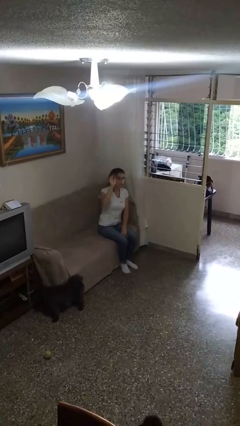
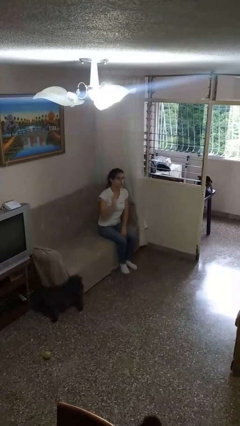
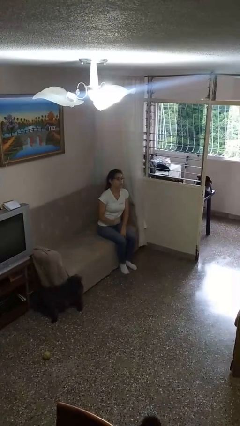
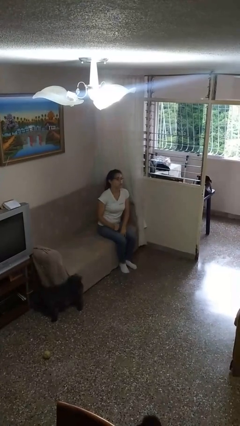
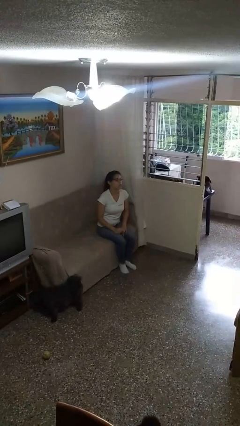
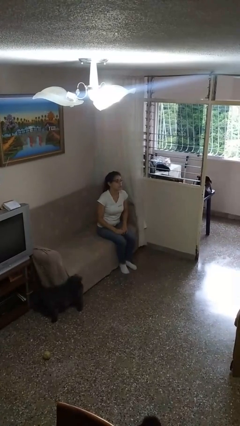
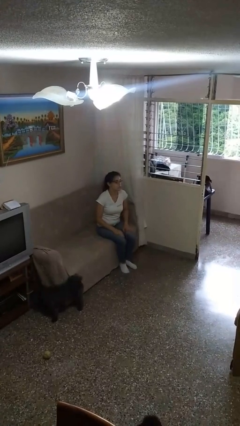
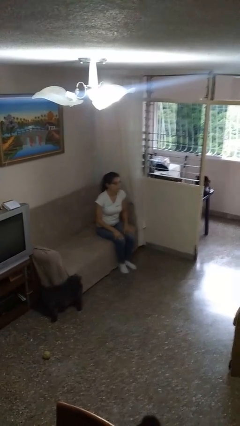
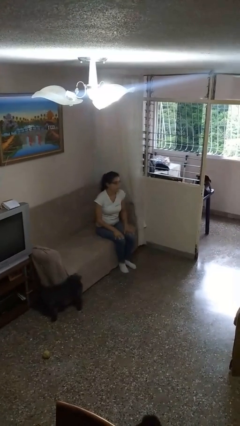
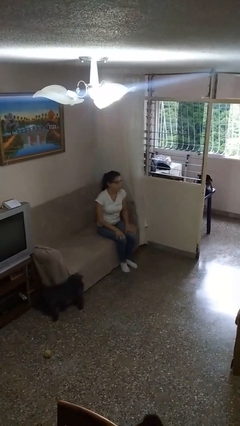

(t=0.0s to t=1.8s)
person gestures lower hand

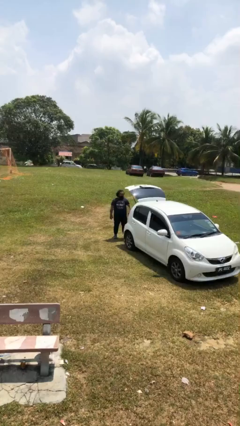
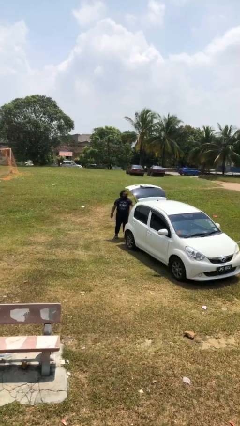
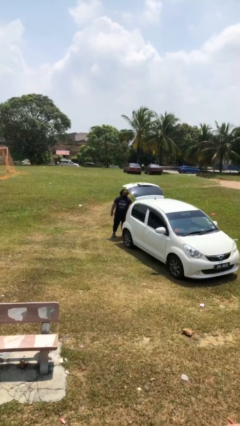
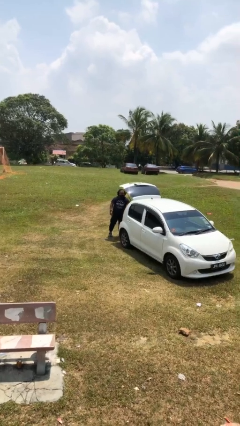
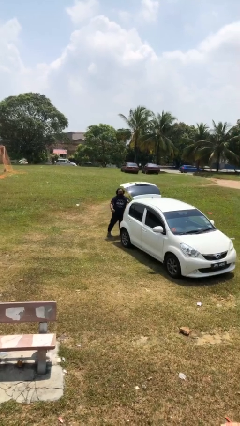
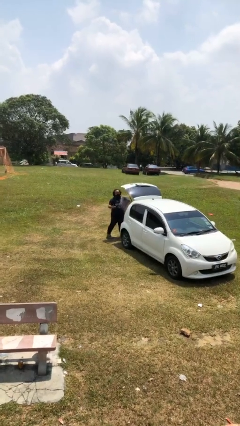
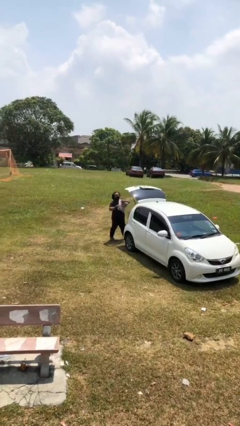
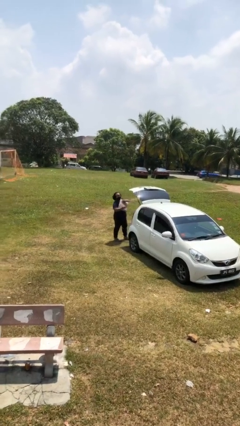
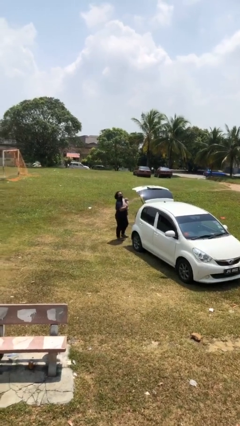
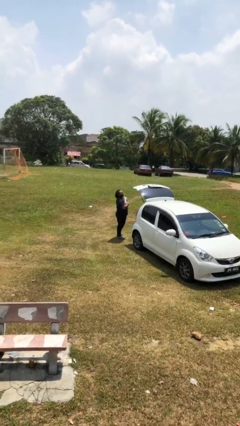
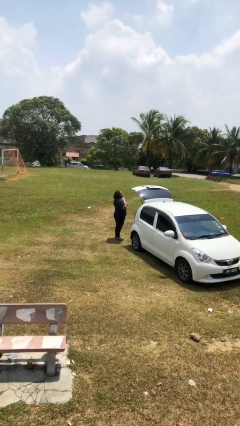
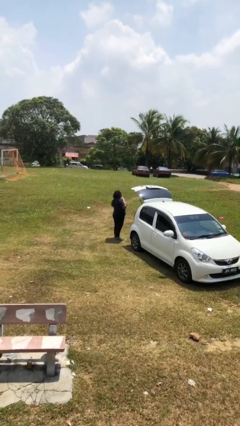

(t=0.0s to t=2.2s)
person unloads car

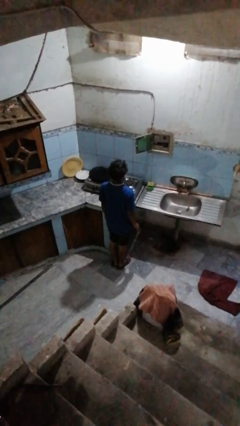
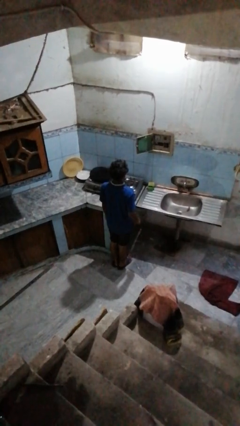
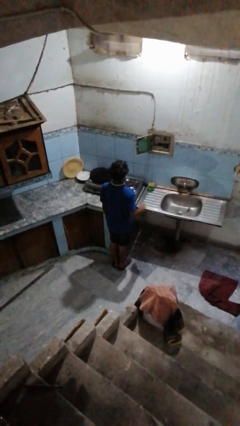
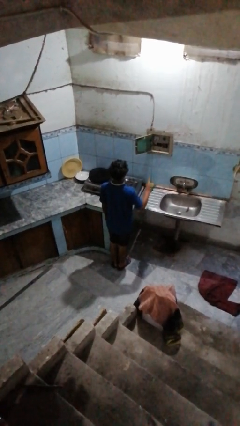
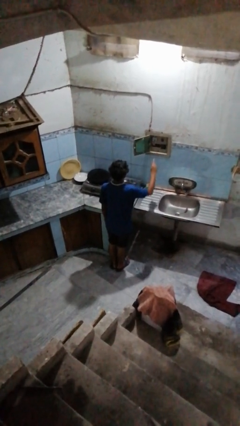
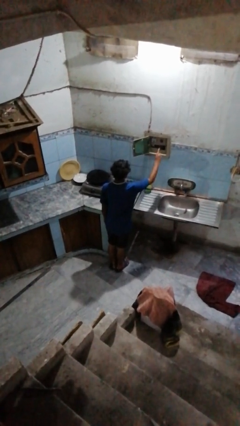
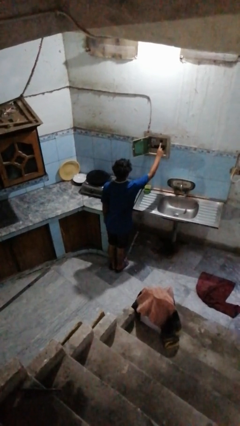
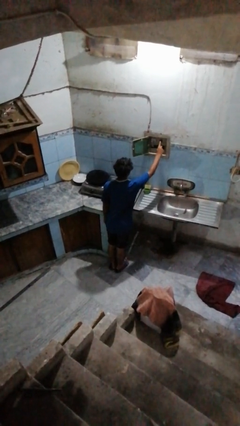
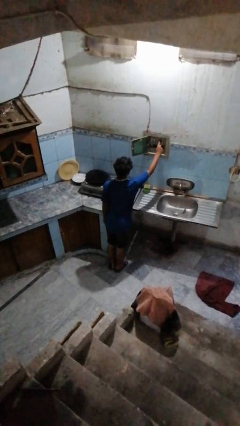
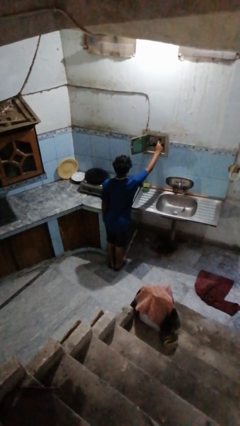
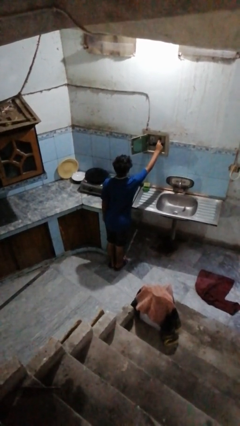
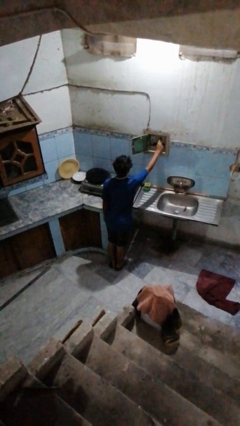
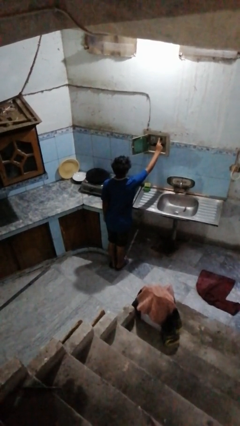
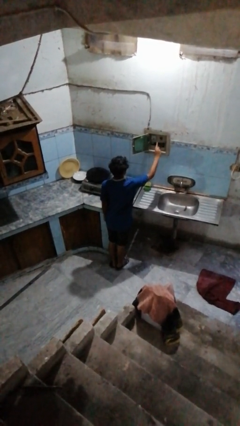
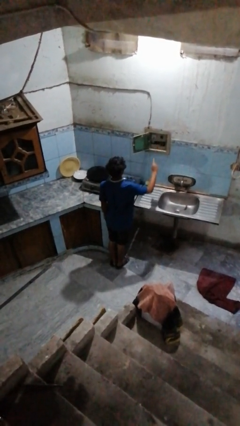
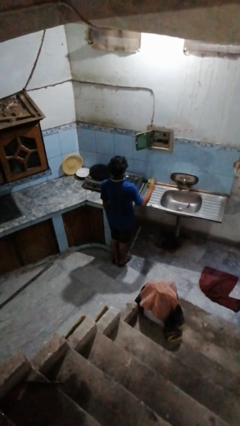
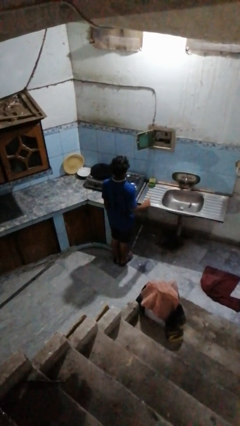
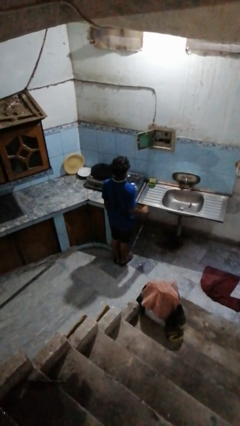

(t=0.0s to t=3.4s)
person puts up smoke detector

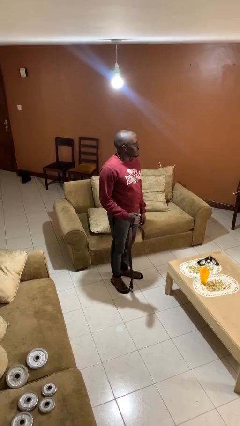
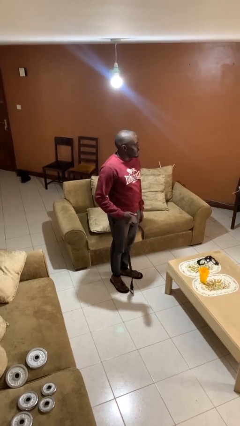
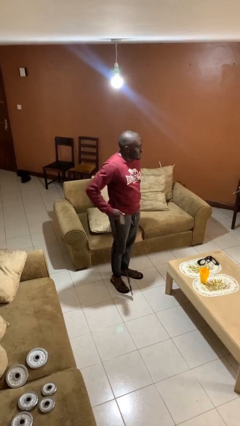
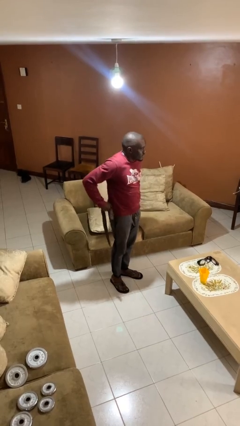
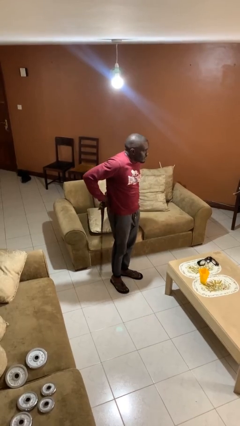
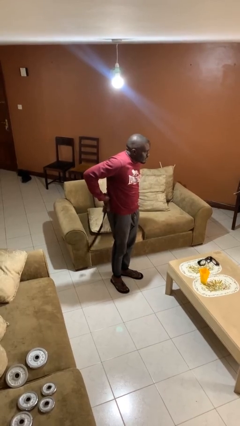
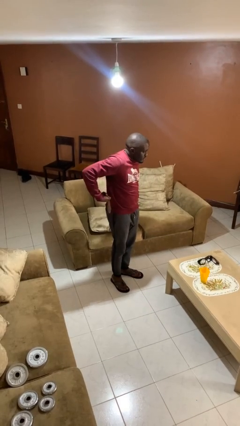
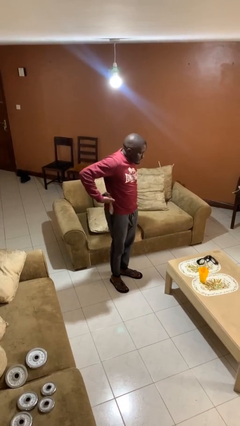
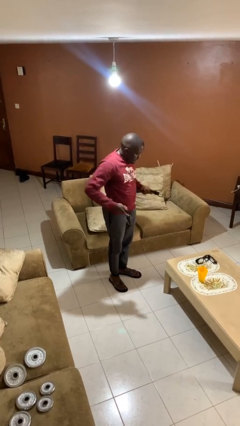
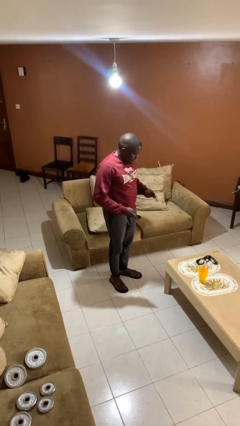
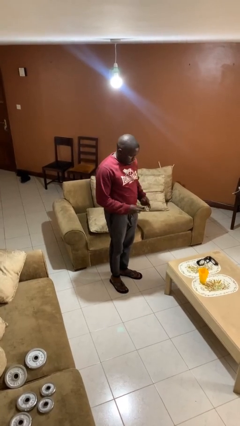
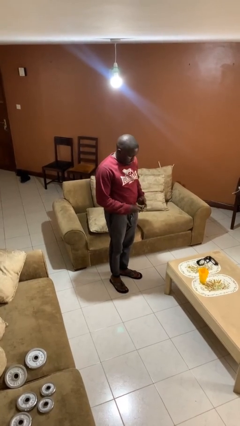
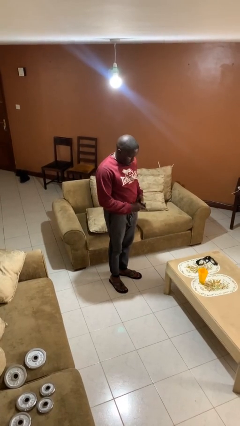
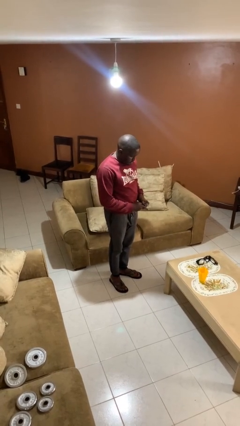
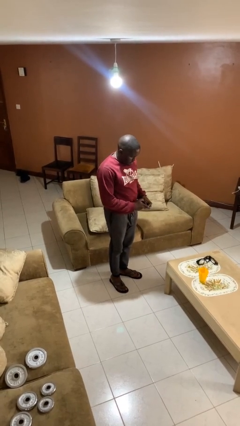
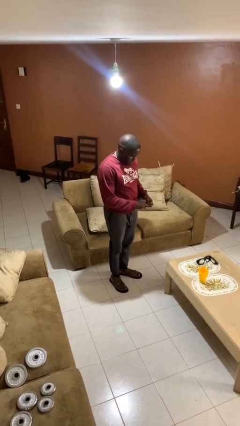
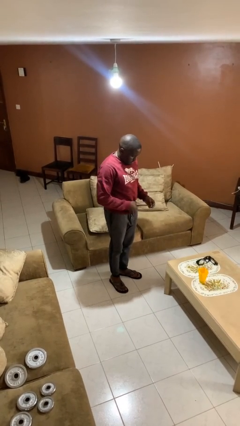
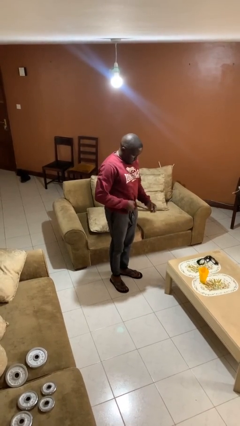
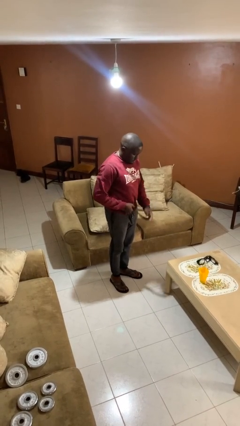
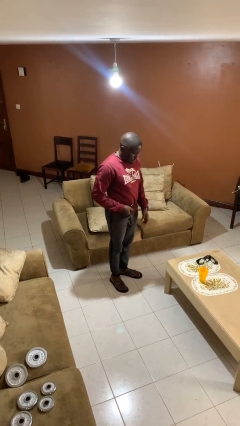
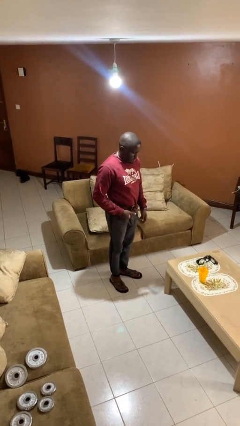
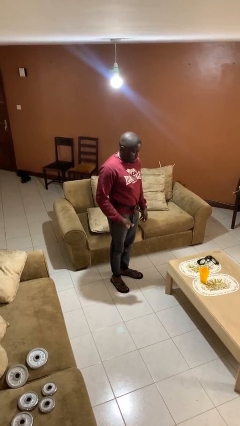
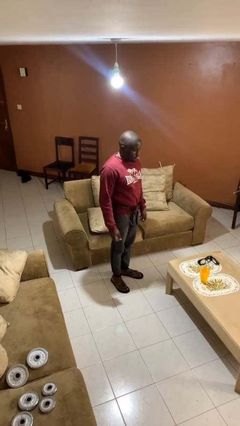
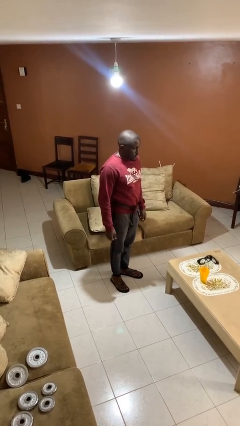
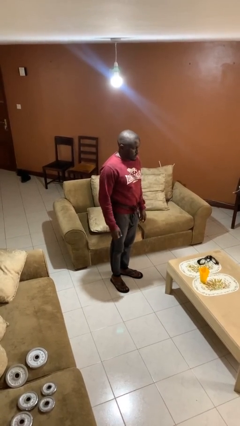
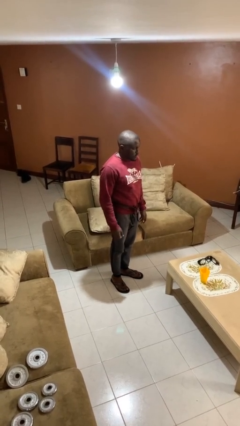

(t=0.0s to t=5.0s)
person puts on belt

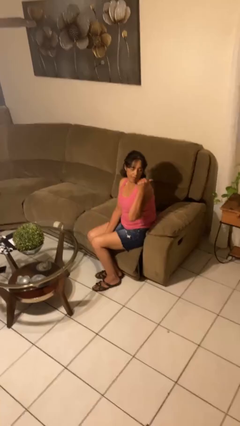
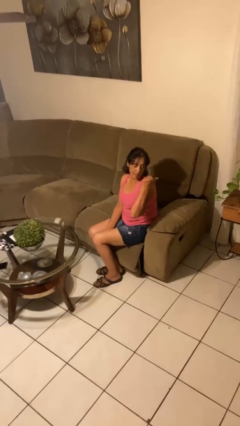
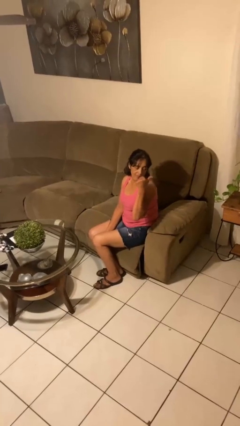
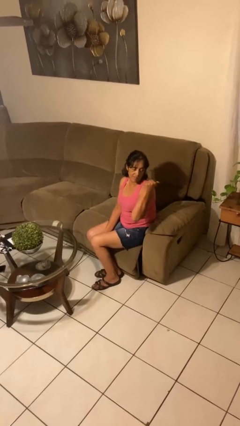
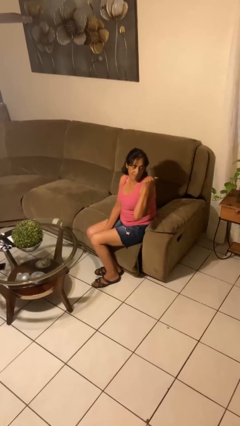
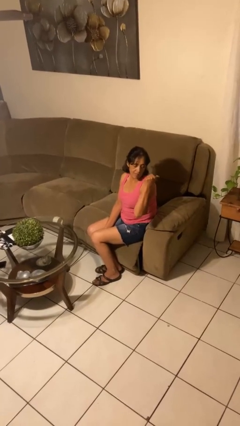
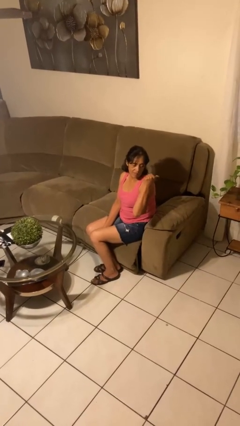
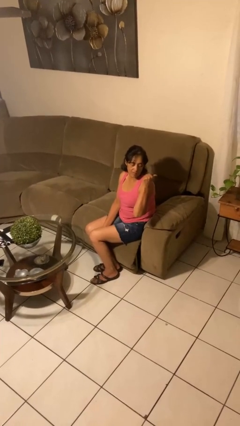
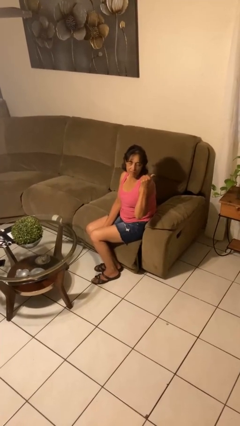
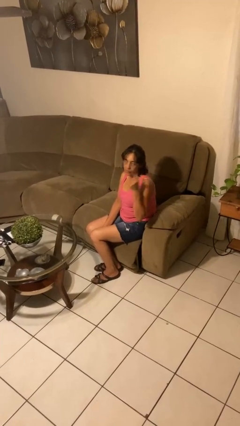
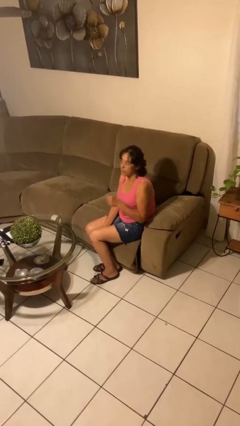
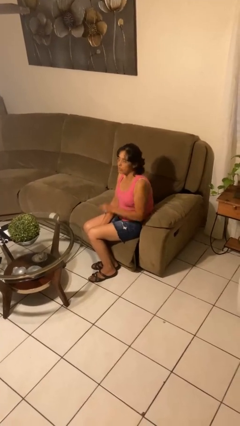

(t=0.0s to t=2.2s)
person gestures behind me

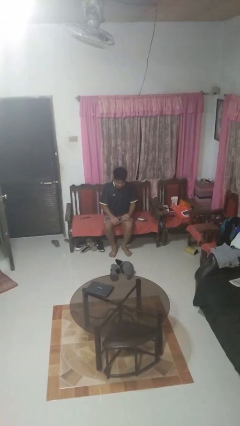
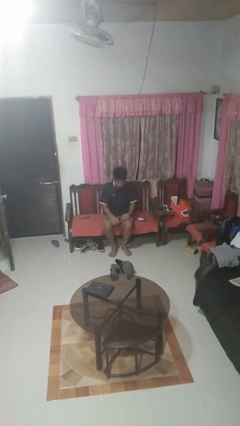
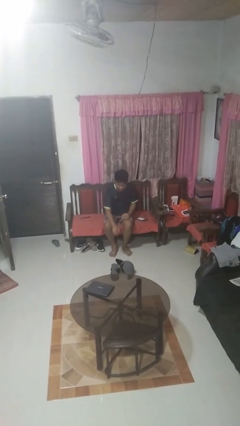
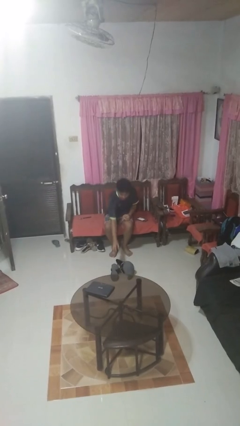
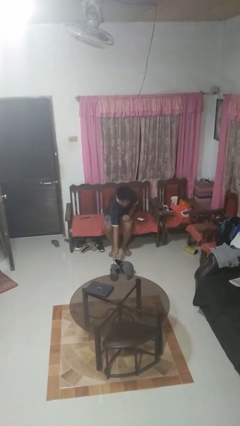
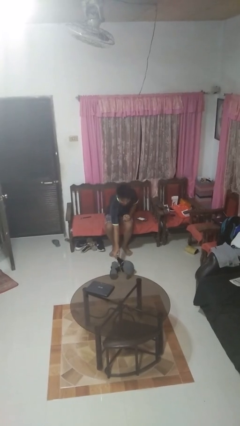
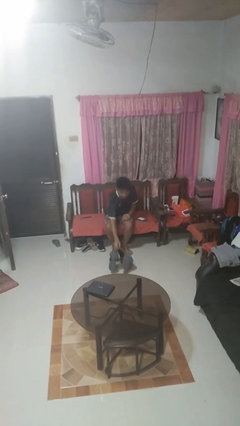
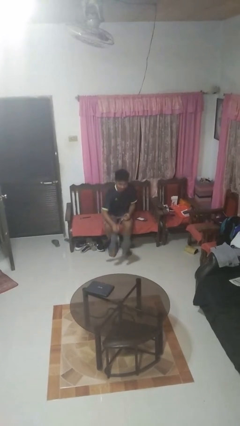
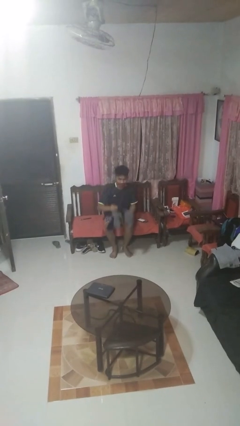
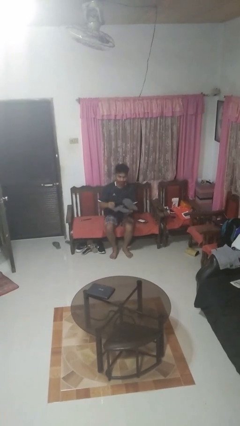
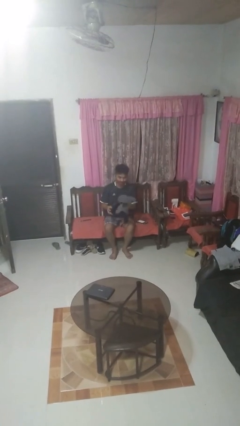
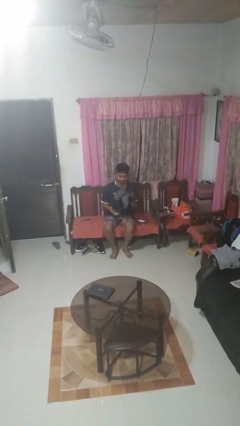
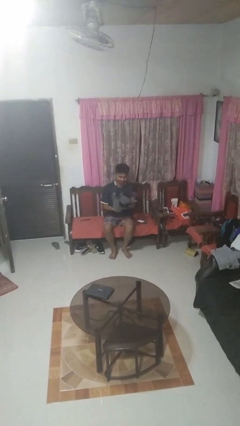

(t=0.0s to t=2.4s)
person picks up object from floor

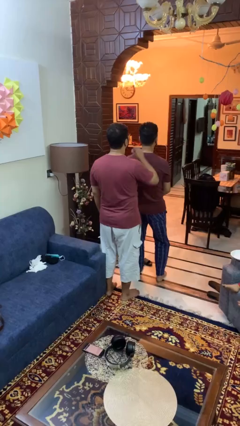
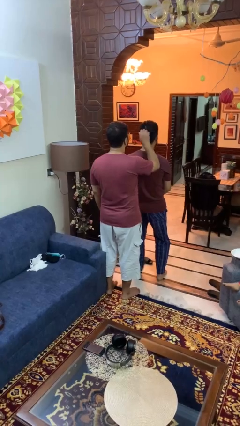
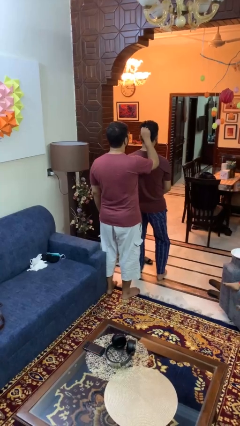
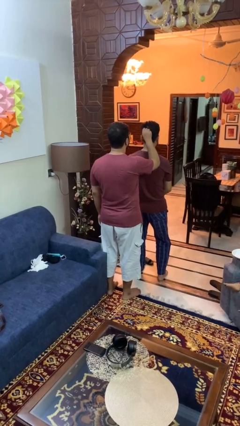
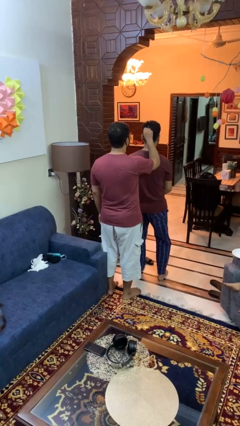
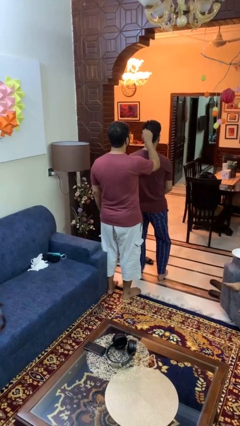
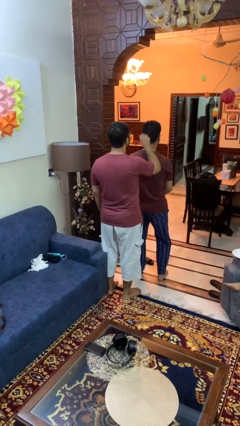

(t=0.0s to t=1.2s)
person grabs person by hair
